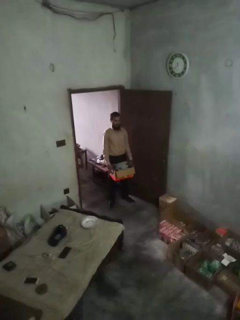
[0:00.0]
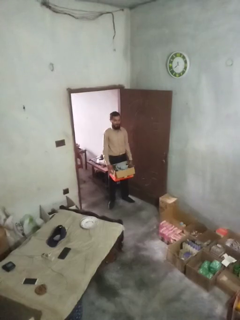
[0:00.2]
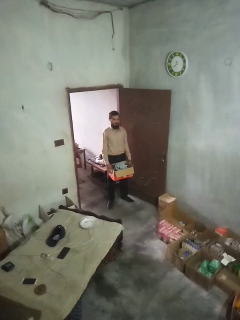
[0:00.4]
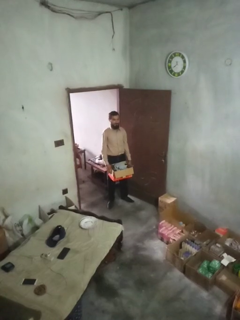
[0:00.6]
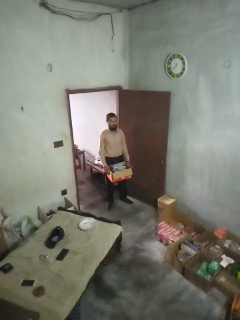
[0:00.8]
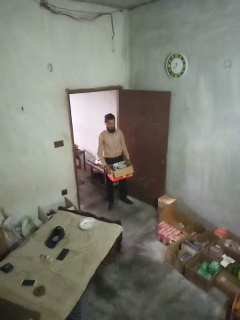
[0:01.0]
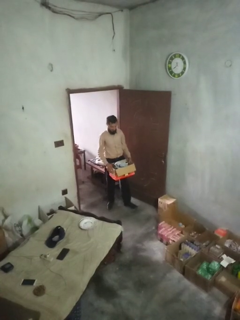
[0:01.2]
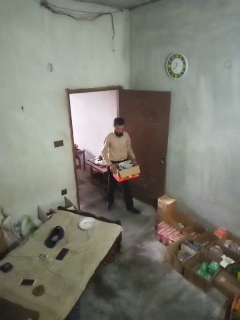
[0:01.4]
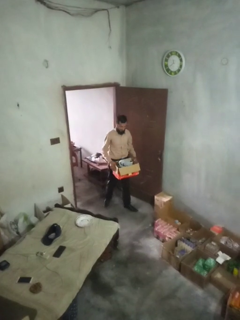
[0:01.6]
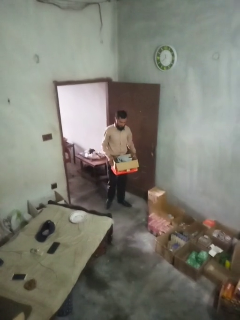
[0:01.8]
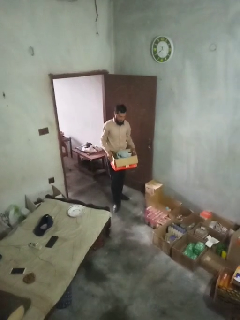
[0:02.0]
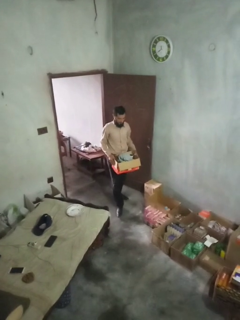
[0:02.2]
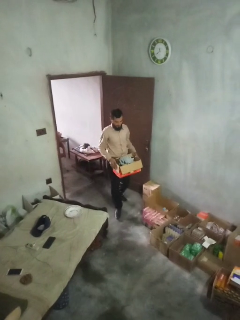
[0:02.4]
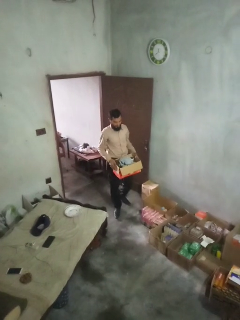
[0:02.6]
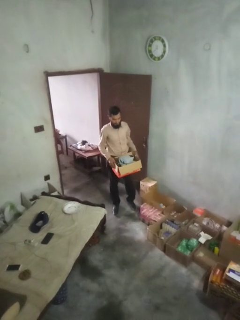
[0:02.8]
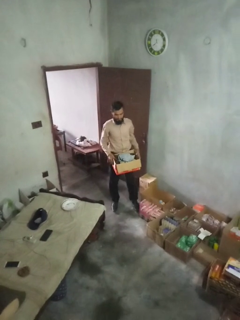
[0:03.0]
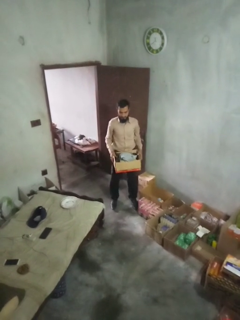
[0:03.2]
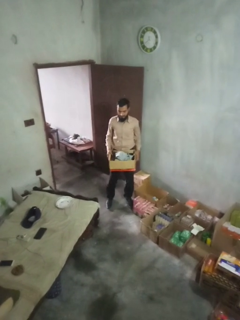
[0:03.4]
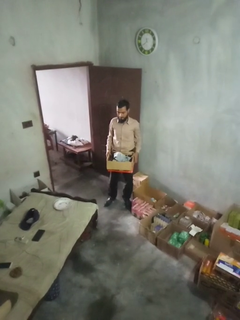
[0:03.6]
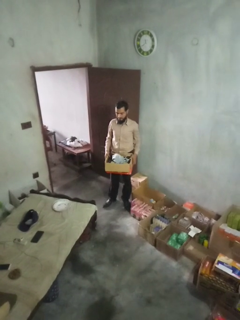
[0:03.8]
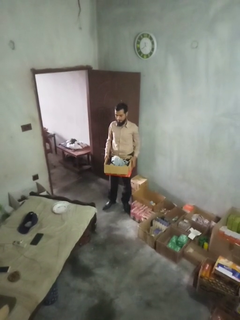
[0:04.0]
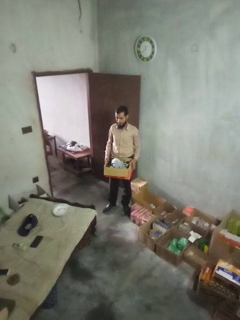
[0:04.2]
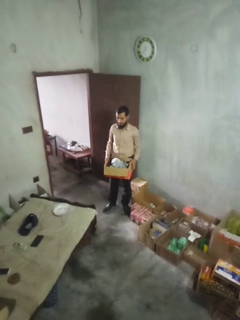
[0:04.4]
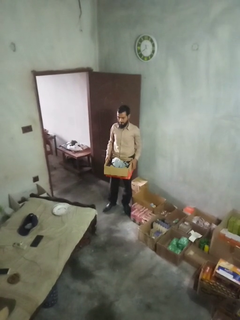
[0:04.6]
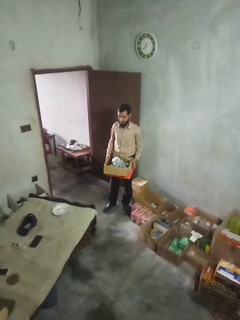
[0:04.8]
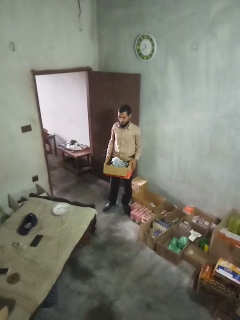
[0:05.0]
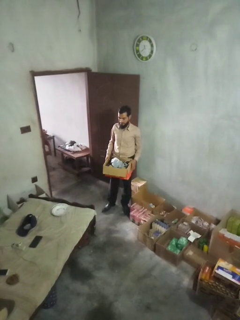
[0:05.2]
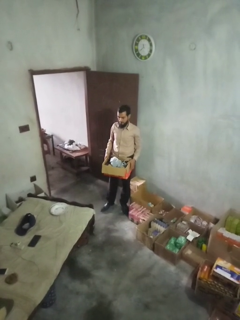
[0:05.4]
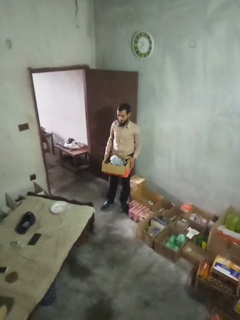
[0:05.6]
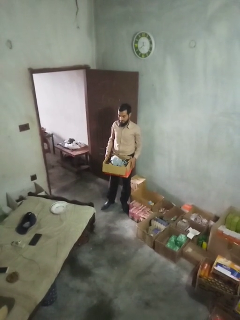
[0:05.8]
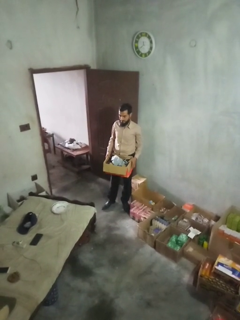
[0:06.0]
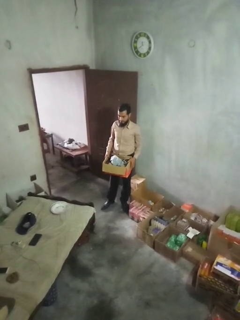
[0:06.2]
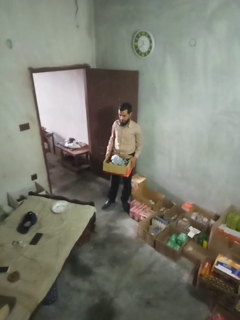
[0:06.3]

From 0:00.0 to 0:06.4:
person carries laundry basket

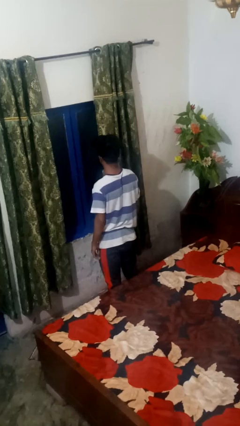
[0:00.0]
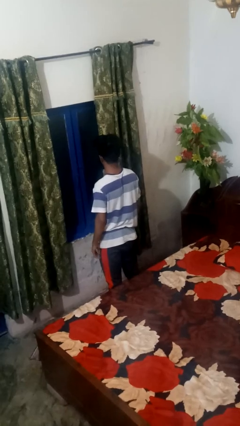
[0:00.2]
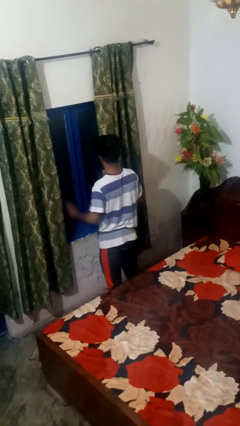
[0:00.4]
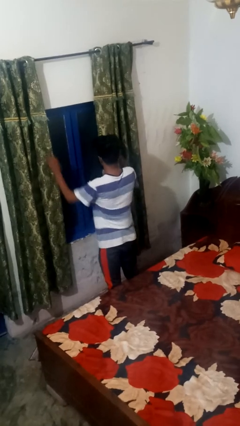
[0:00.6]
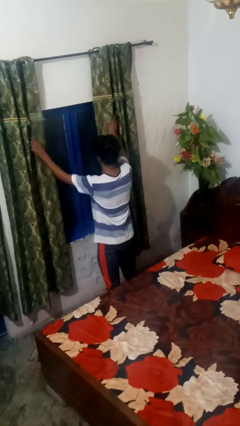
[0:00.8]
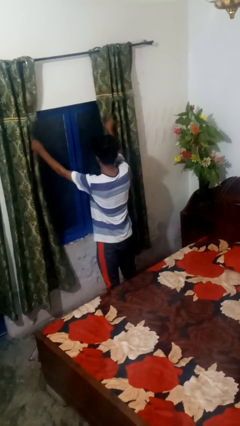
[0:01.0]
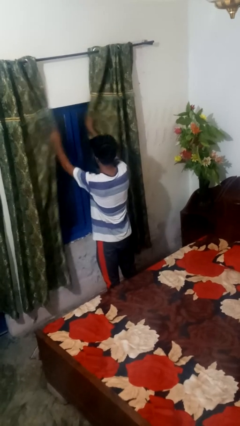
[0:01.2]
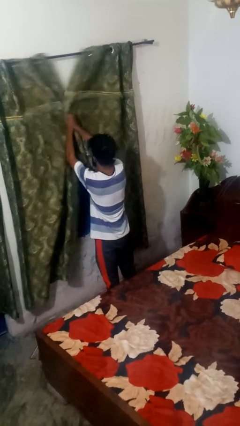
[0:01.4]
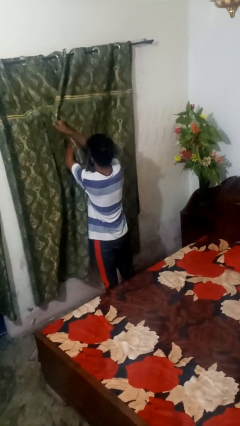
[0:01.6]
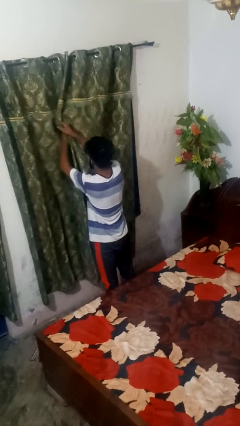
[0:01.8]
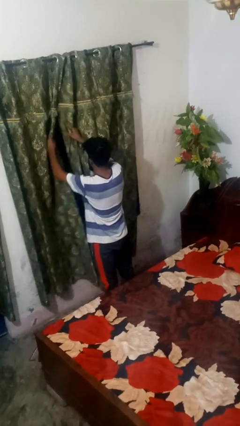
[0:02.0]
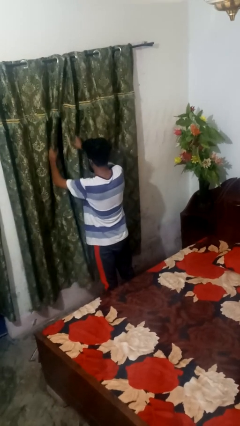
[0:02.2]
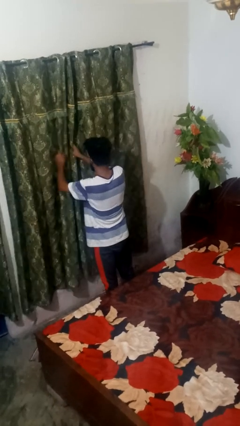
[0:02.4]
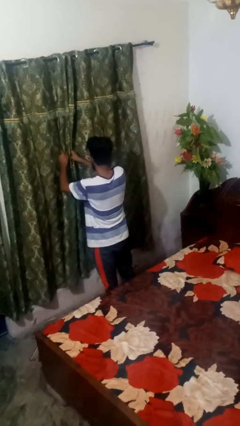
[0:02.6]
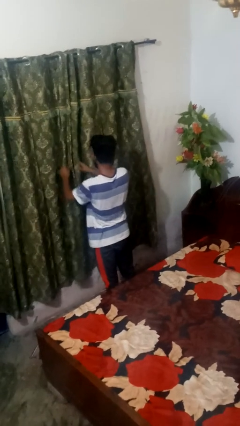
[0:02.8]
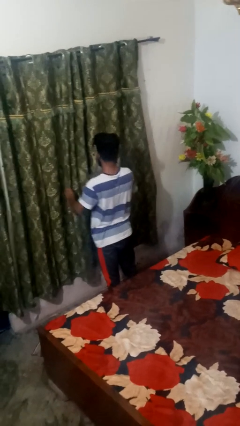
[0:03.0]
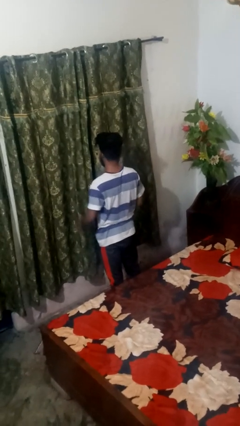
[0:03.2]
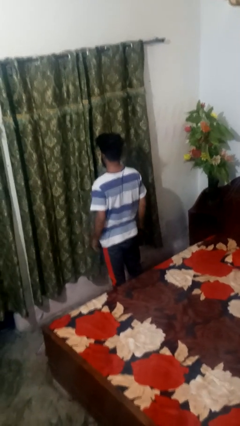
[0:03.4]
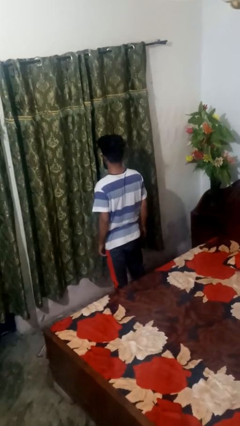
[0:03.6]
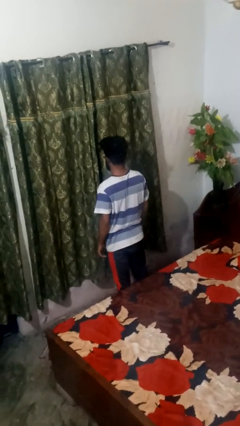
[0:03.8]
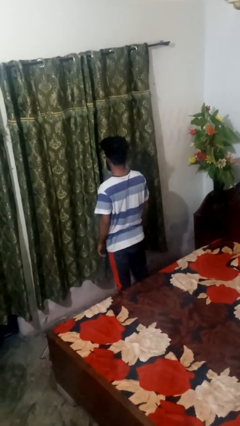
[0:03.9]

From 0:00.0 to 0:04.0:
person closes curtains

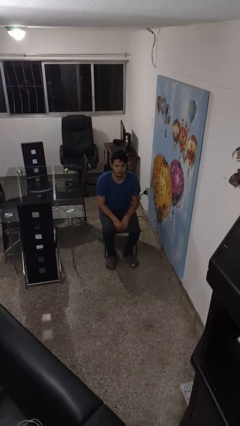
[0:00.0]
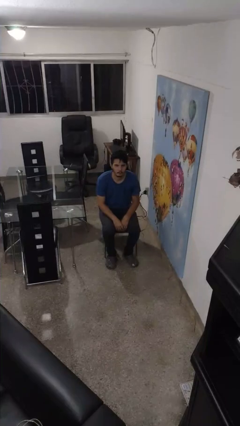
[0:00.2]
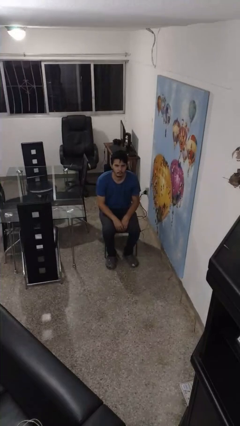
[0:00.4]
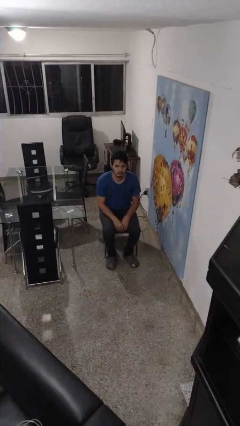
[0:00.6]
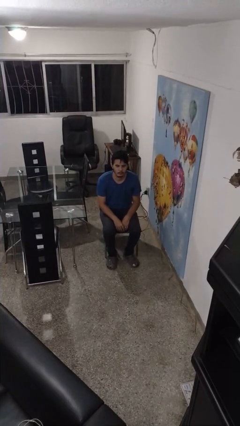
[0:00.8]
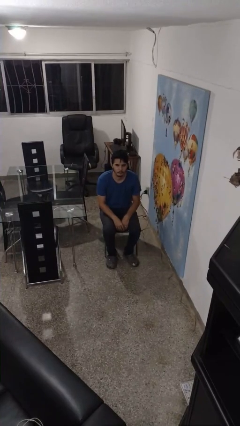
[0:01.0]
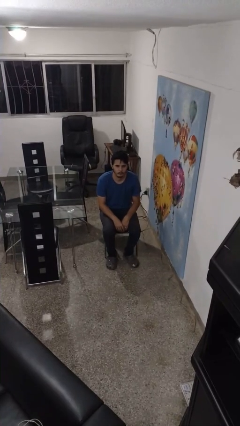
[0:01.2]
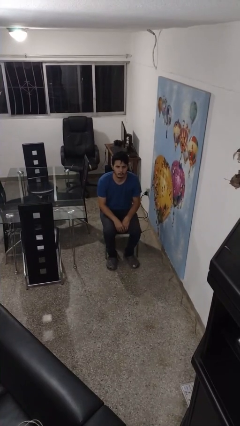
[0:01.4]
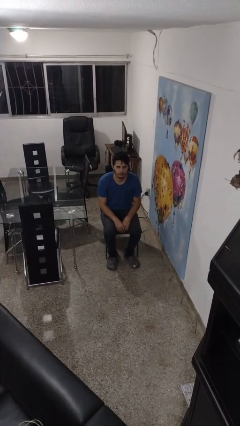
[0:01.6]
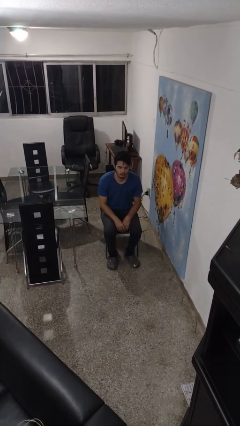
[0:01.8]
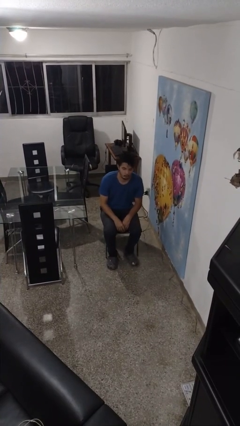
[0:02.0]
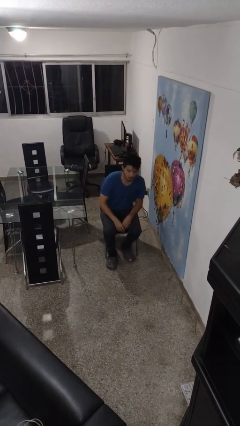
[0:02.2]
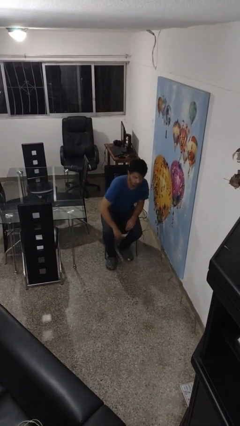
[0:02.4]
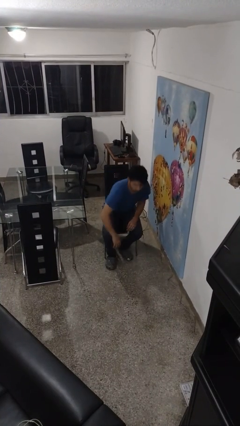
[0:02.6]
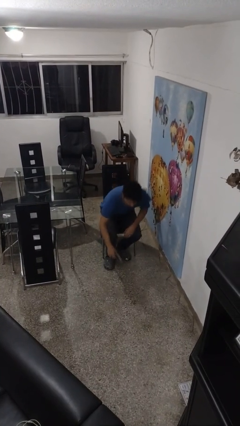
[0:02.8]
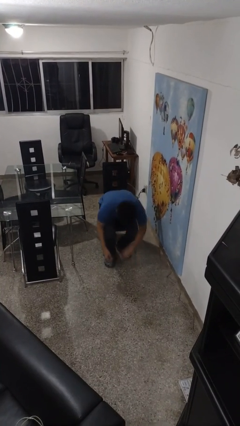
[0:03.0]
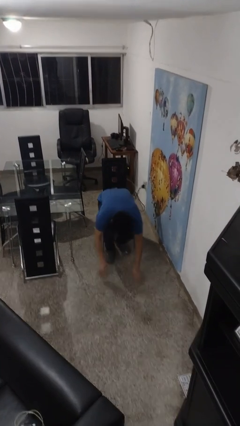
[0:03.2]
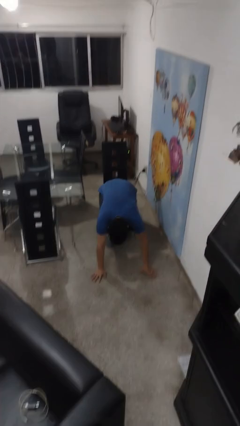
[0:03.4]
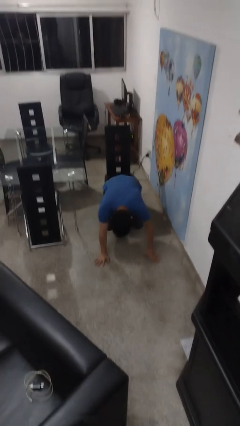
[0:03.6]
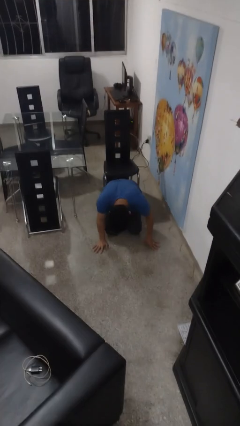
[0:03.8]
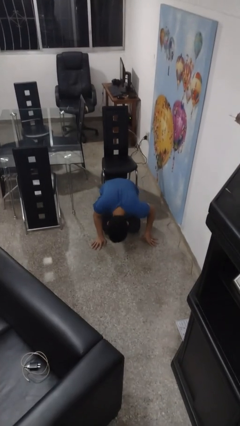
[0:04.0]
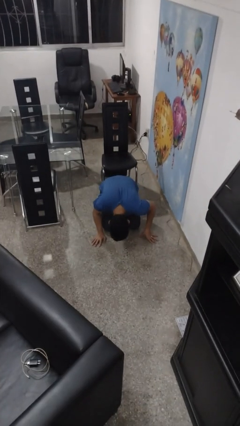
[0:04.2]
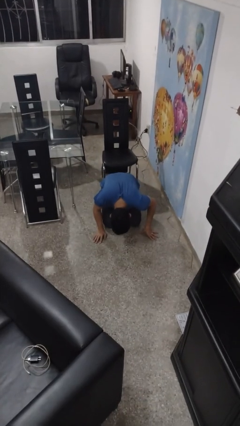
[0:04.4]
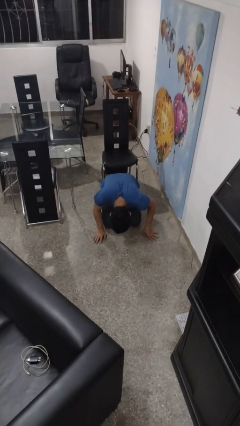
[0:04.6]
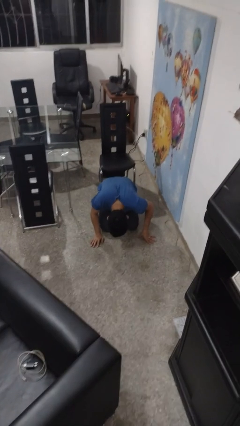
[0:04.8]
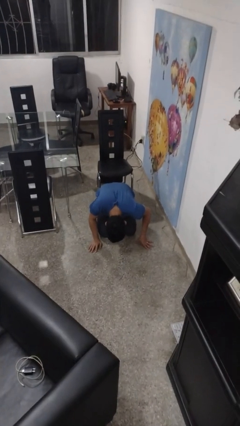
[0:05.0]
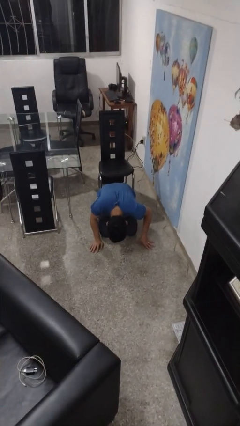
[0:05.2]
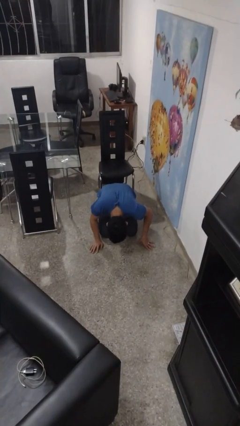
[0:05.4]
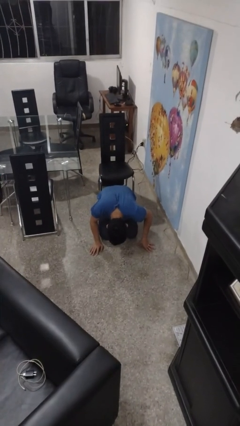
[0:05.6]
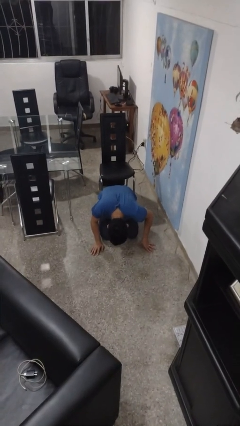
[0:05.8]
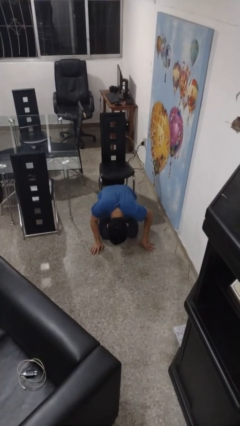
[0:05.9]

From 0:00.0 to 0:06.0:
person falls from chair

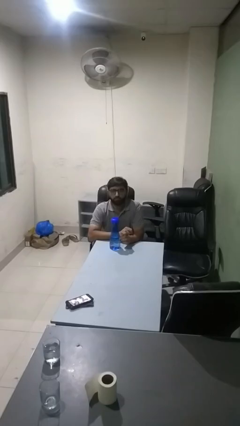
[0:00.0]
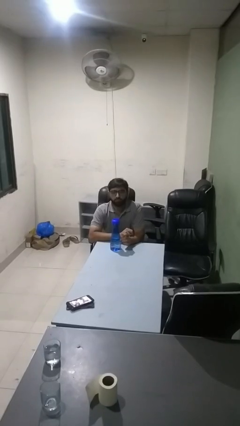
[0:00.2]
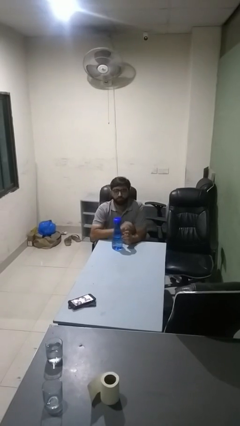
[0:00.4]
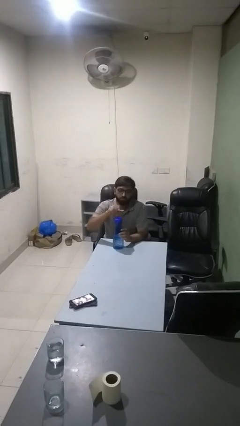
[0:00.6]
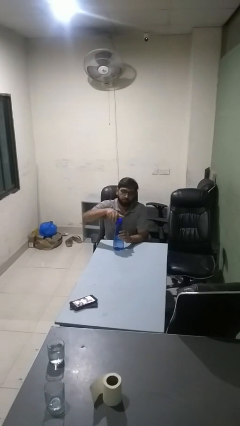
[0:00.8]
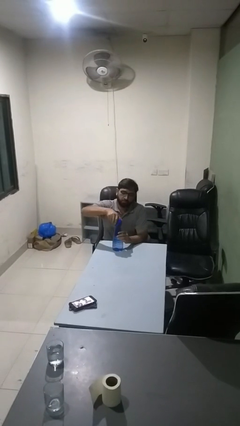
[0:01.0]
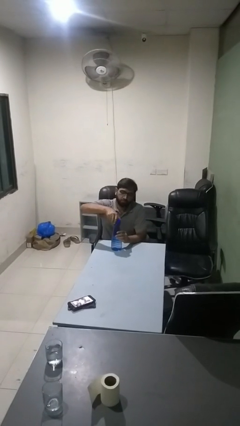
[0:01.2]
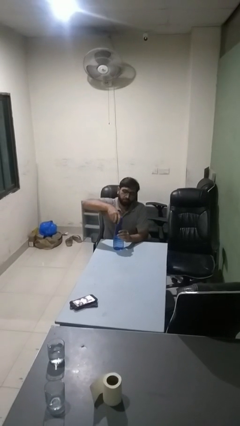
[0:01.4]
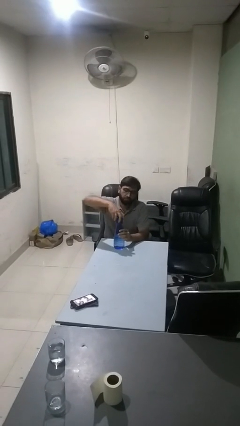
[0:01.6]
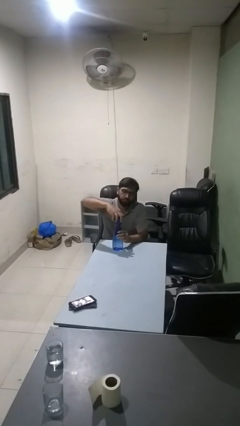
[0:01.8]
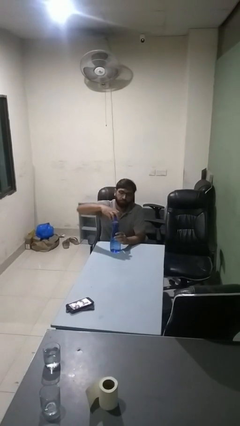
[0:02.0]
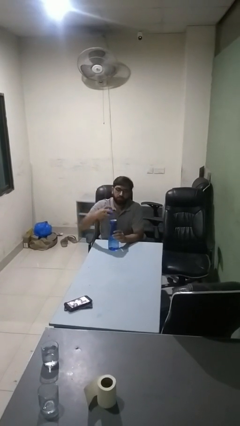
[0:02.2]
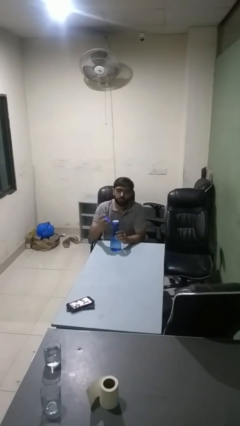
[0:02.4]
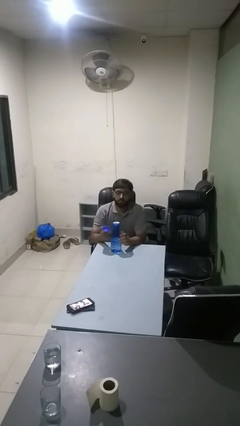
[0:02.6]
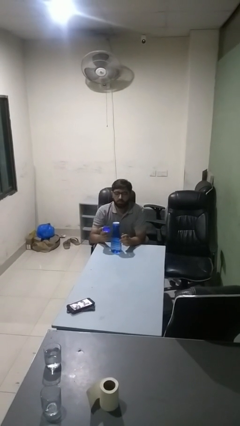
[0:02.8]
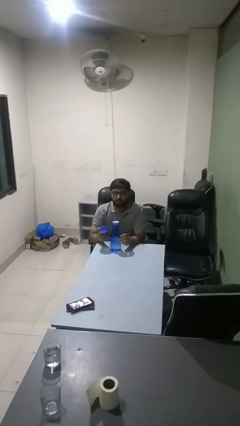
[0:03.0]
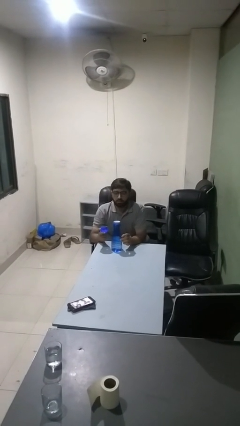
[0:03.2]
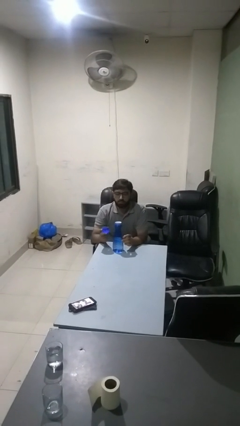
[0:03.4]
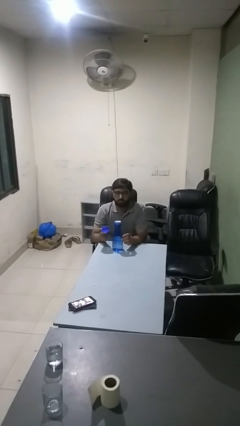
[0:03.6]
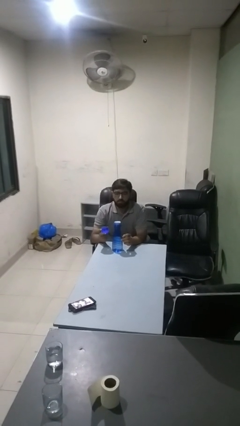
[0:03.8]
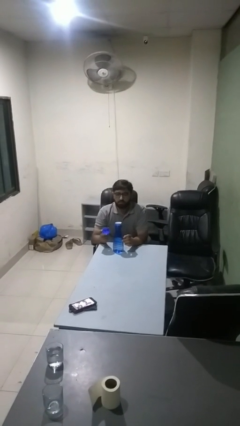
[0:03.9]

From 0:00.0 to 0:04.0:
person unscrews lid from bottle
